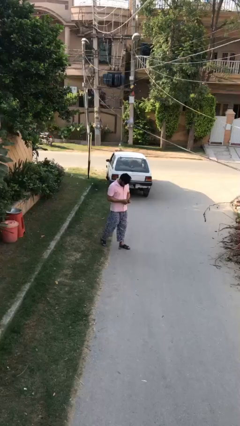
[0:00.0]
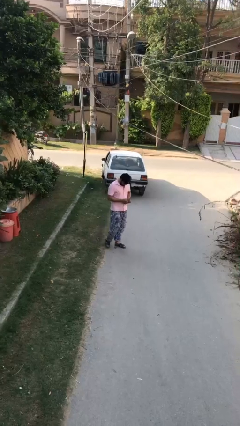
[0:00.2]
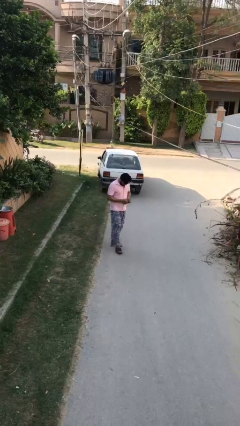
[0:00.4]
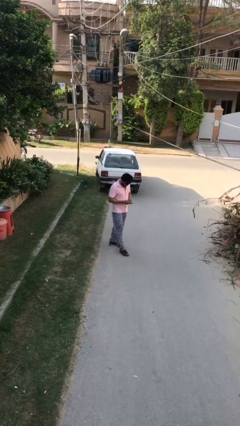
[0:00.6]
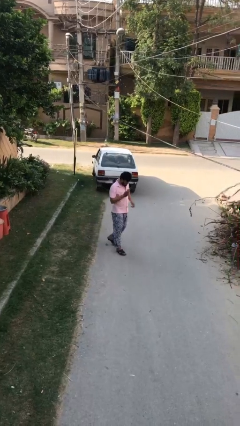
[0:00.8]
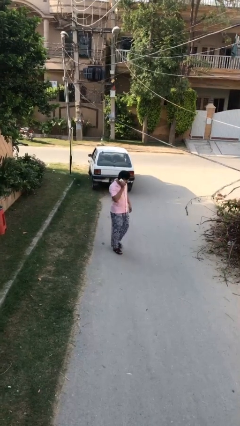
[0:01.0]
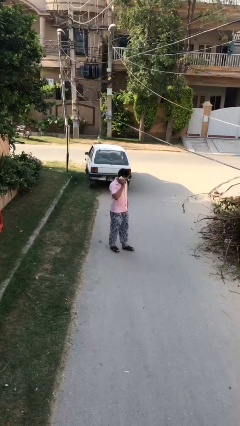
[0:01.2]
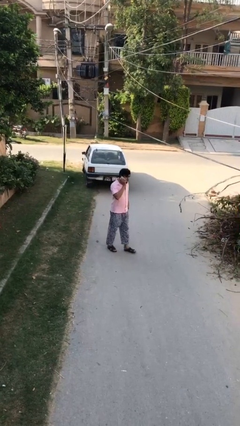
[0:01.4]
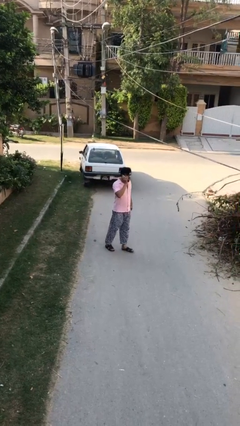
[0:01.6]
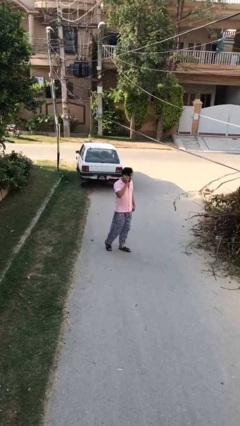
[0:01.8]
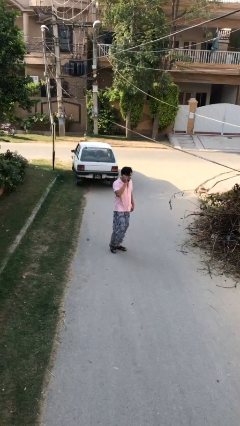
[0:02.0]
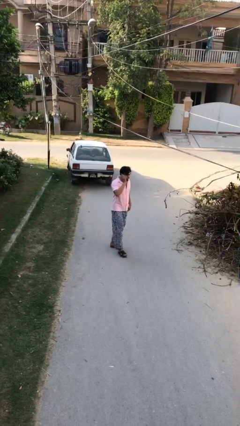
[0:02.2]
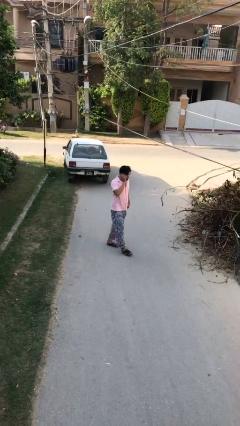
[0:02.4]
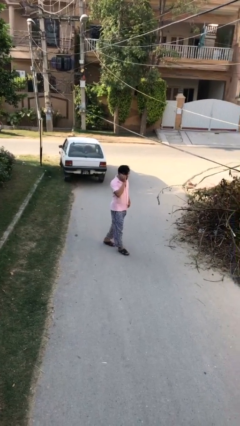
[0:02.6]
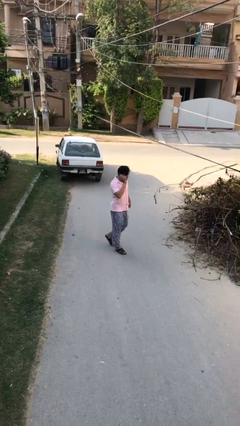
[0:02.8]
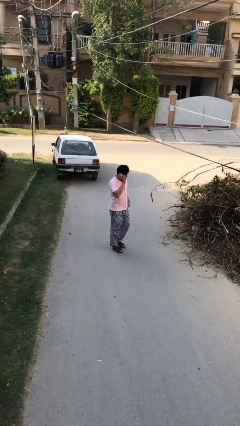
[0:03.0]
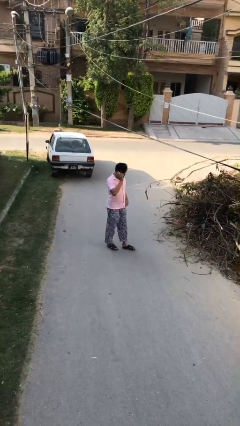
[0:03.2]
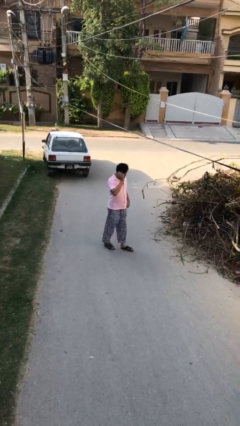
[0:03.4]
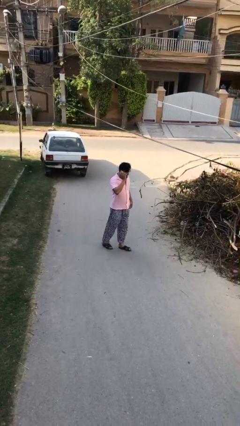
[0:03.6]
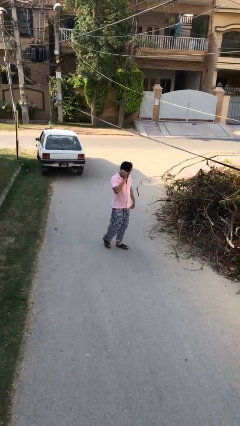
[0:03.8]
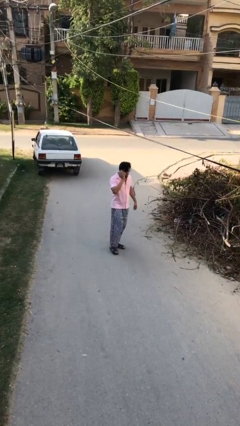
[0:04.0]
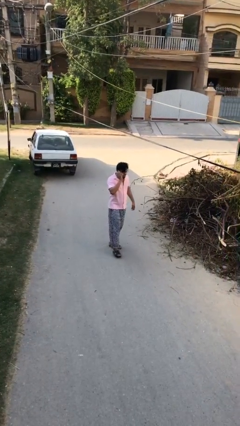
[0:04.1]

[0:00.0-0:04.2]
person talks on phone

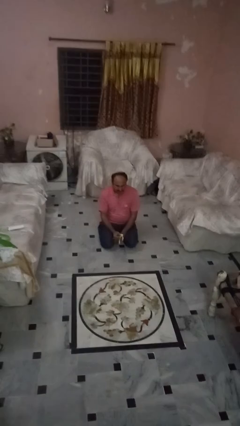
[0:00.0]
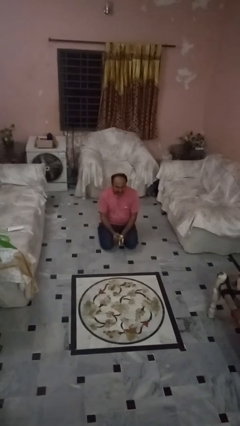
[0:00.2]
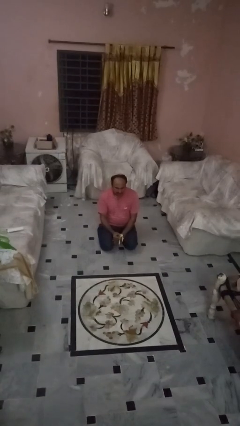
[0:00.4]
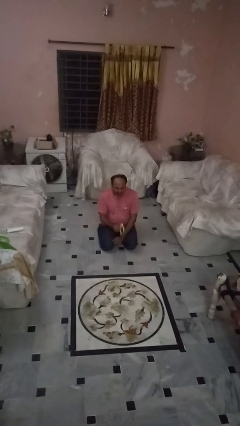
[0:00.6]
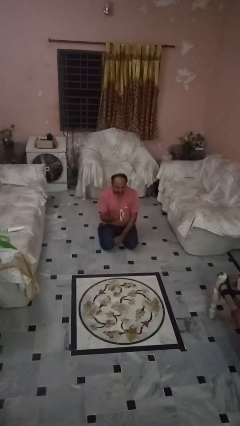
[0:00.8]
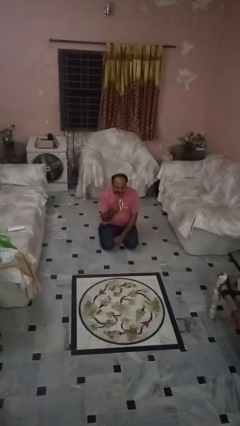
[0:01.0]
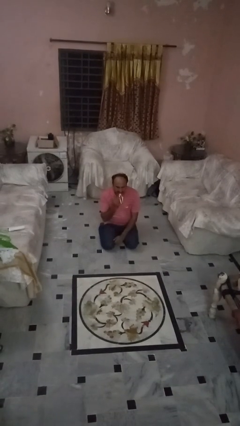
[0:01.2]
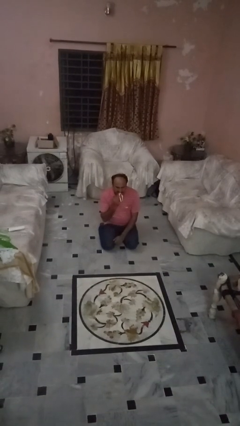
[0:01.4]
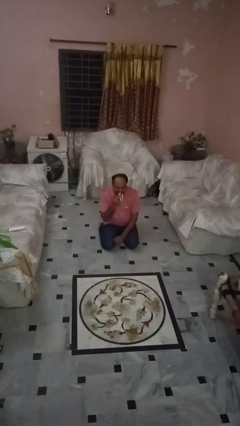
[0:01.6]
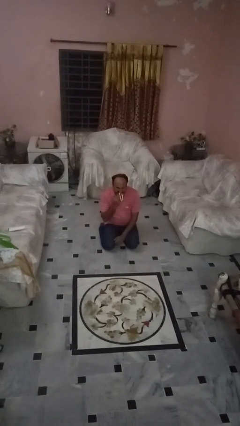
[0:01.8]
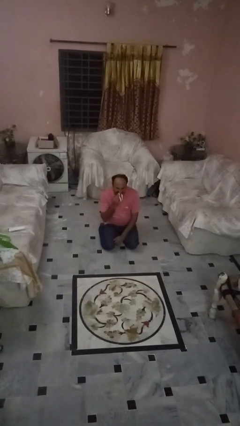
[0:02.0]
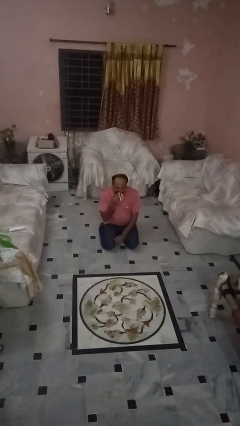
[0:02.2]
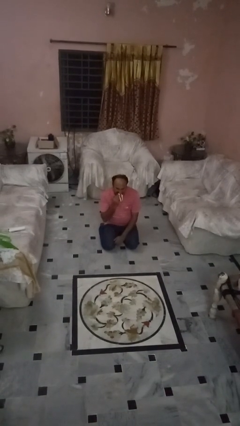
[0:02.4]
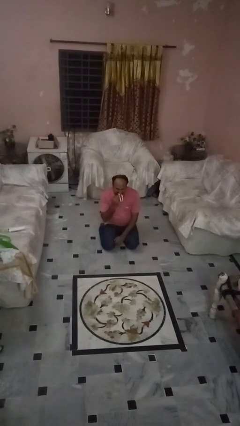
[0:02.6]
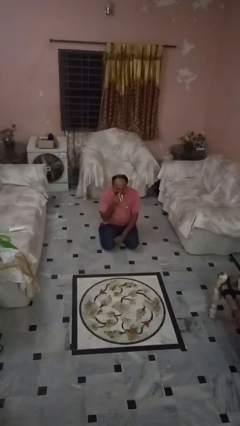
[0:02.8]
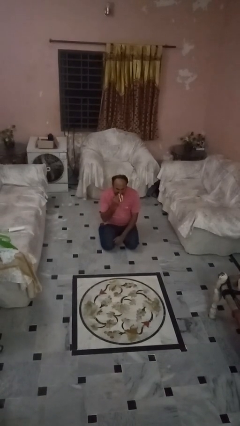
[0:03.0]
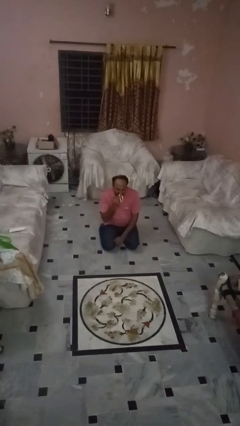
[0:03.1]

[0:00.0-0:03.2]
person eats banana

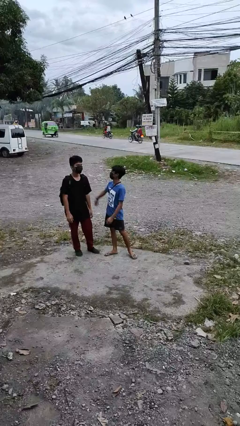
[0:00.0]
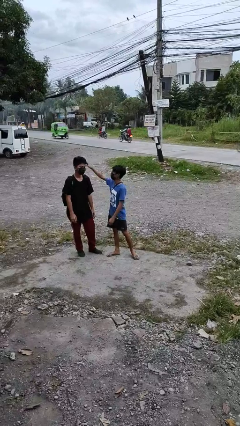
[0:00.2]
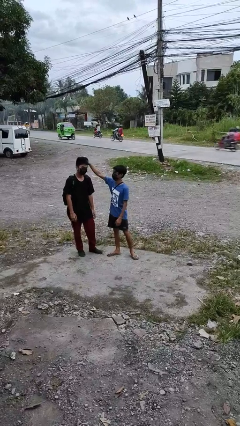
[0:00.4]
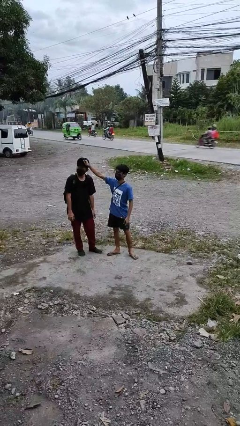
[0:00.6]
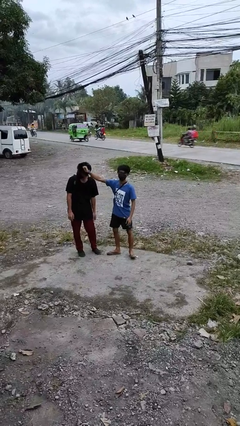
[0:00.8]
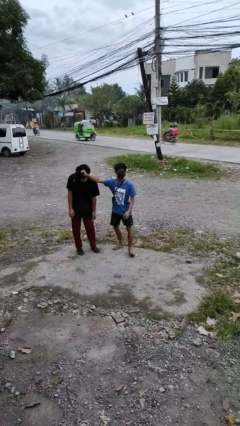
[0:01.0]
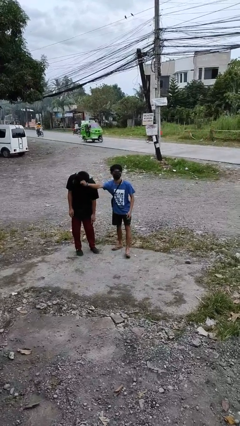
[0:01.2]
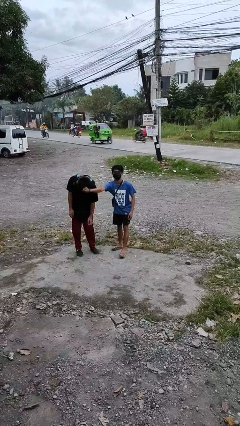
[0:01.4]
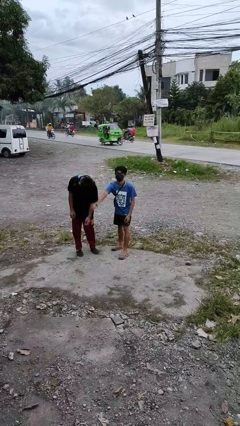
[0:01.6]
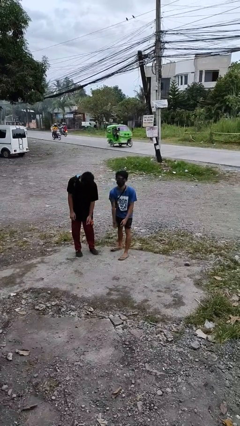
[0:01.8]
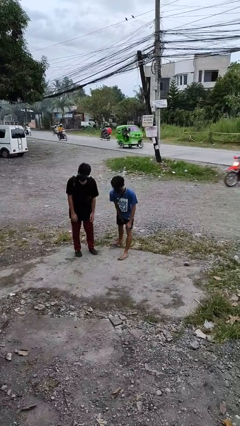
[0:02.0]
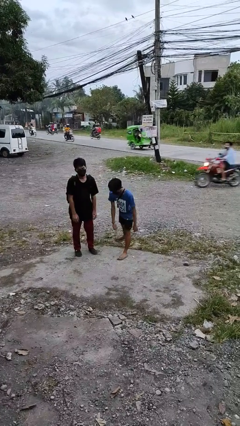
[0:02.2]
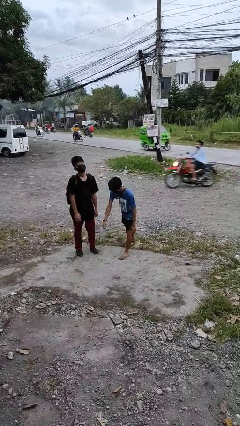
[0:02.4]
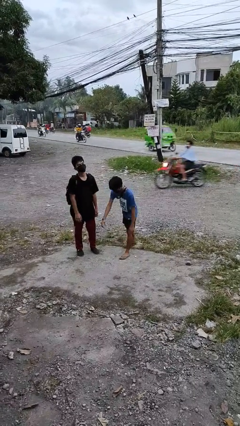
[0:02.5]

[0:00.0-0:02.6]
person grabs person by hair

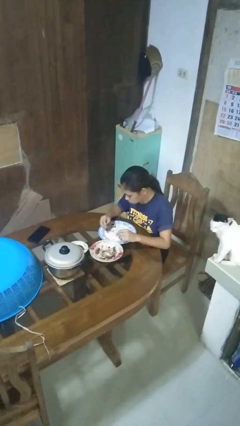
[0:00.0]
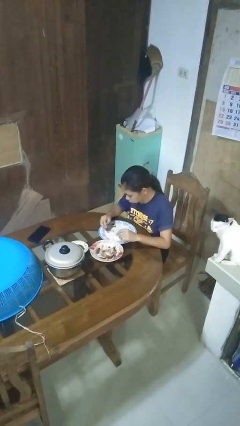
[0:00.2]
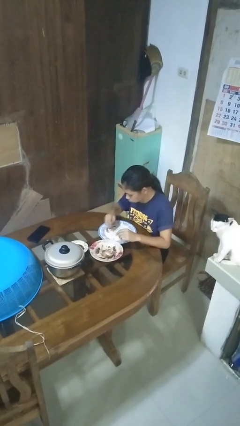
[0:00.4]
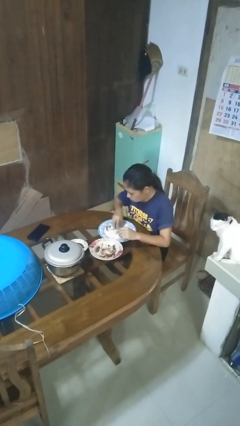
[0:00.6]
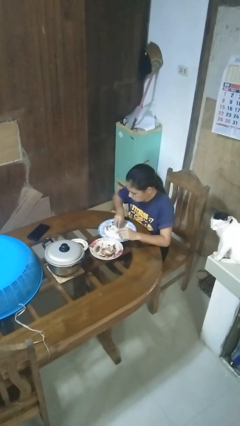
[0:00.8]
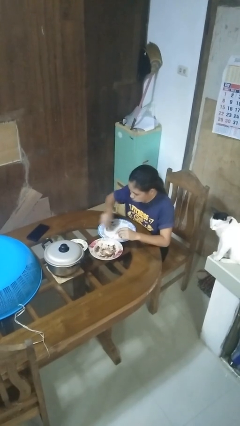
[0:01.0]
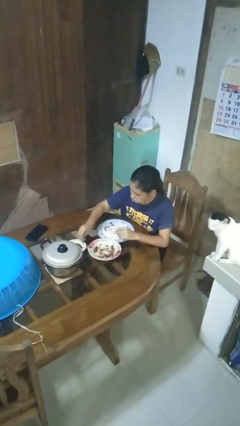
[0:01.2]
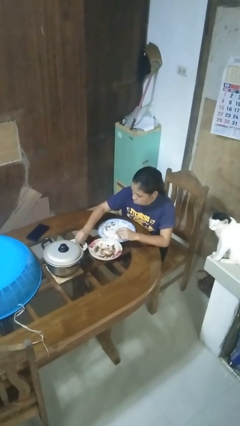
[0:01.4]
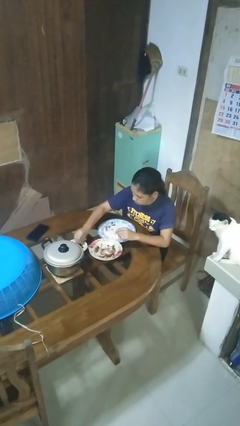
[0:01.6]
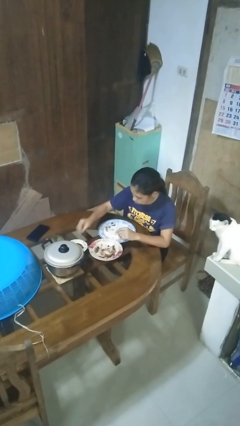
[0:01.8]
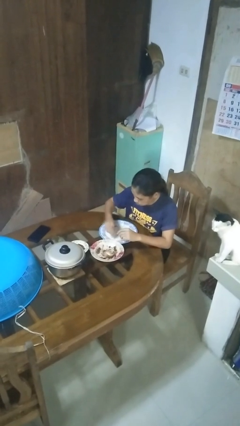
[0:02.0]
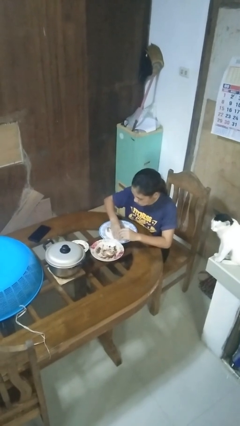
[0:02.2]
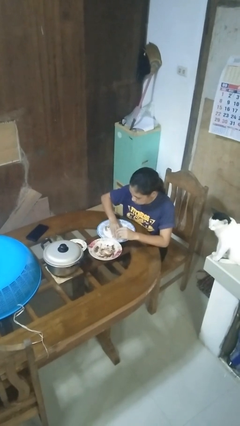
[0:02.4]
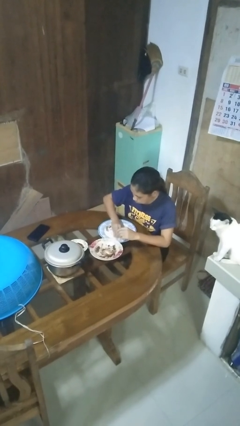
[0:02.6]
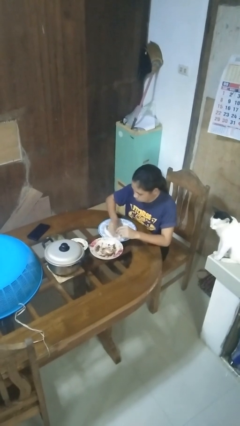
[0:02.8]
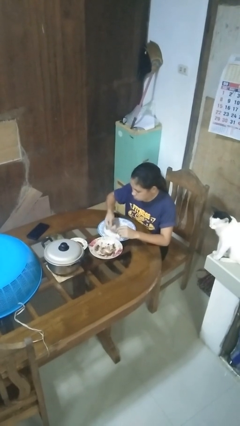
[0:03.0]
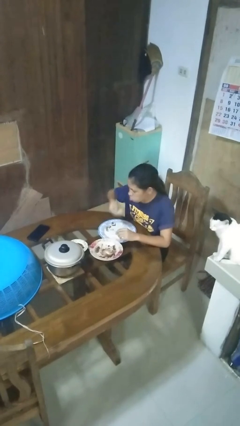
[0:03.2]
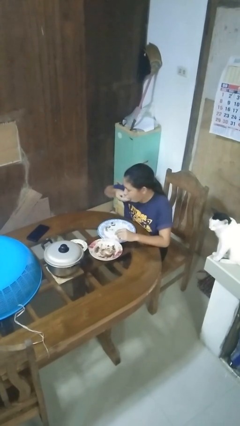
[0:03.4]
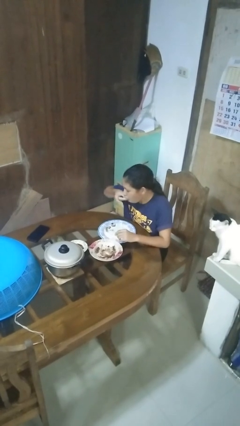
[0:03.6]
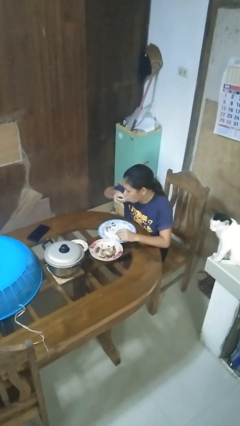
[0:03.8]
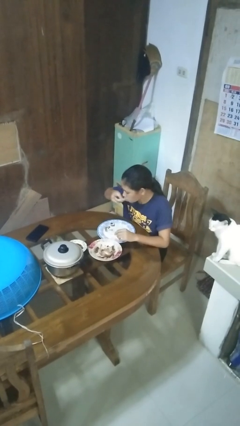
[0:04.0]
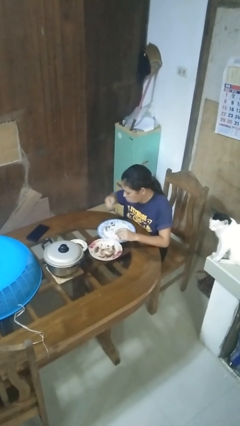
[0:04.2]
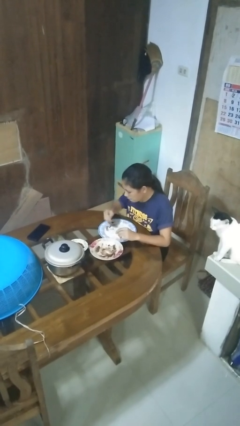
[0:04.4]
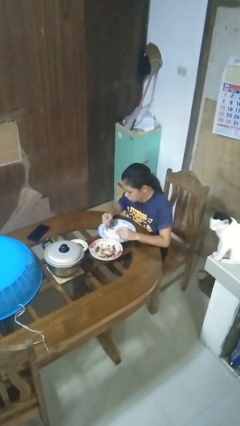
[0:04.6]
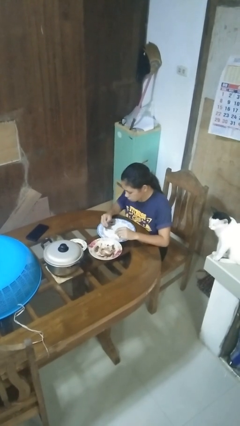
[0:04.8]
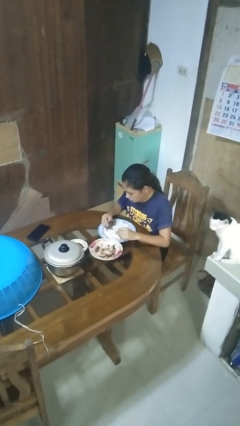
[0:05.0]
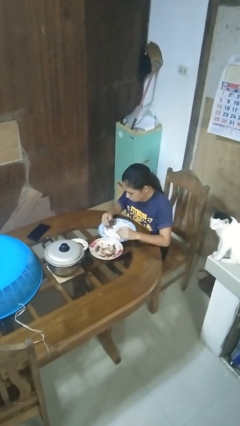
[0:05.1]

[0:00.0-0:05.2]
person eats with hands

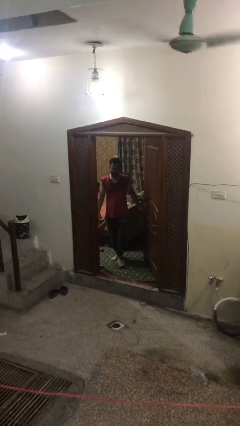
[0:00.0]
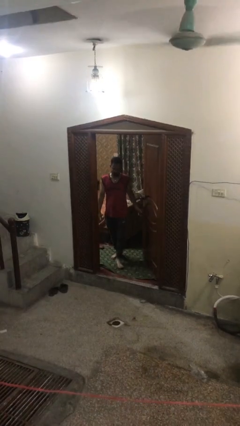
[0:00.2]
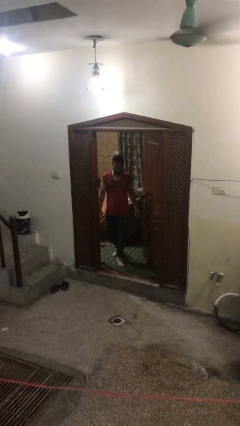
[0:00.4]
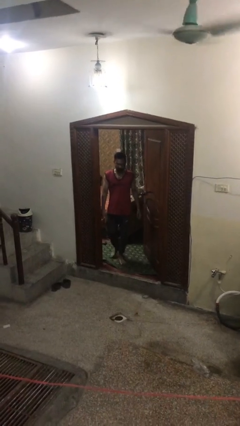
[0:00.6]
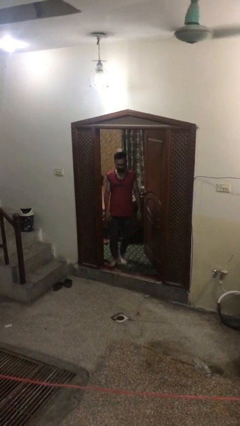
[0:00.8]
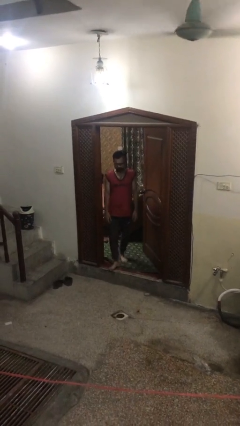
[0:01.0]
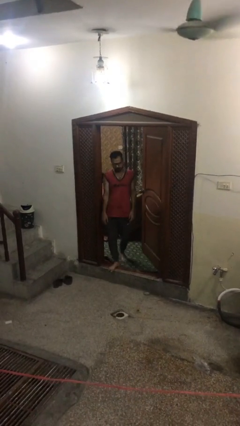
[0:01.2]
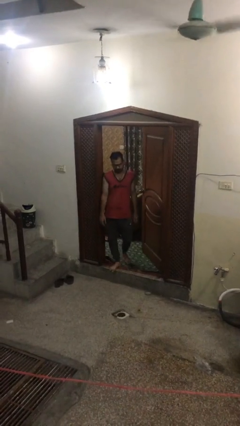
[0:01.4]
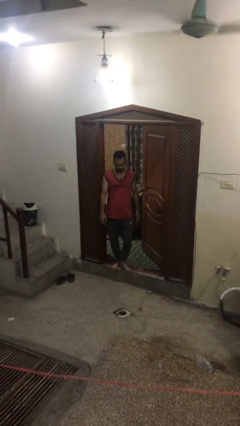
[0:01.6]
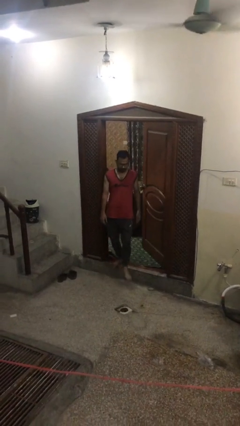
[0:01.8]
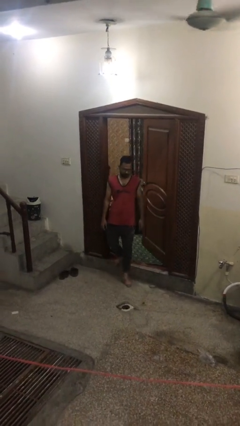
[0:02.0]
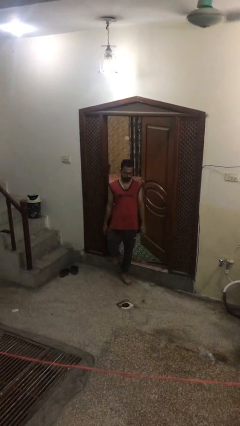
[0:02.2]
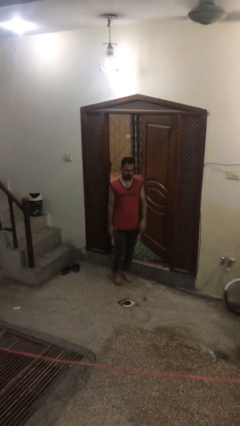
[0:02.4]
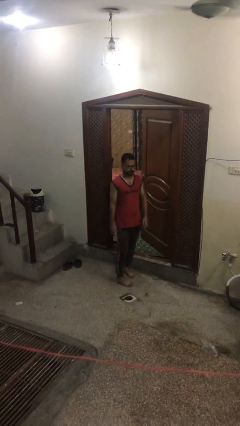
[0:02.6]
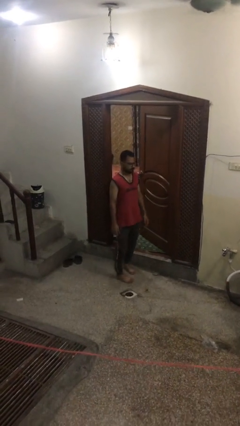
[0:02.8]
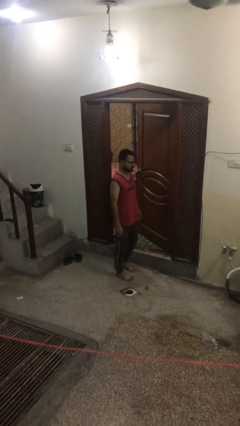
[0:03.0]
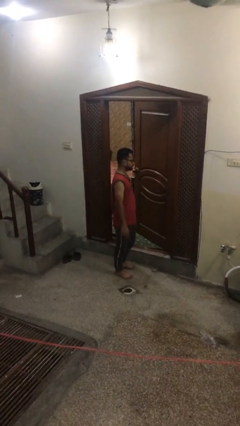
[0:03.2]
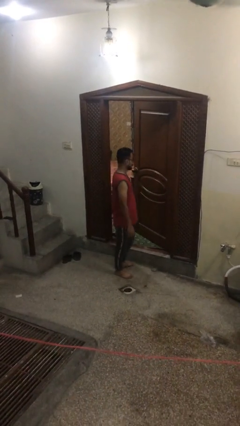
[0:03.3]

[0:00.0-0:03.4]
person enters scene through structure
